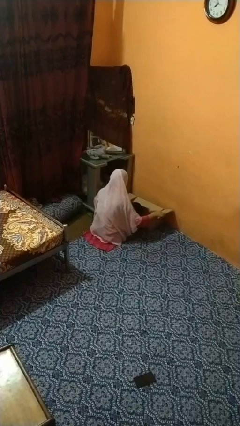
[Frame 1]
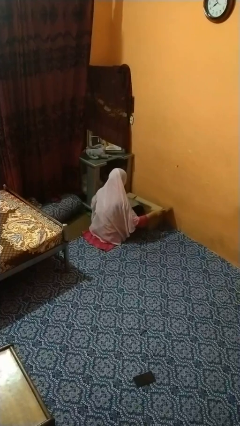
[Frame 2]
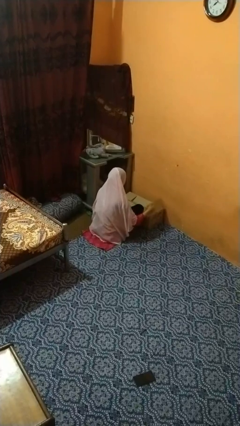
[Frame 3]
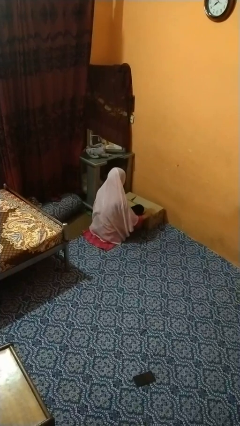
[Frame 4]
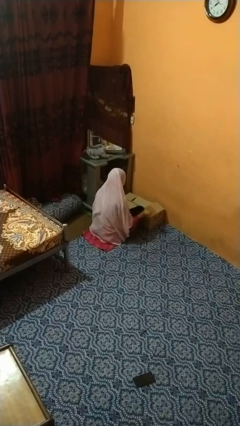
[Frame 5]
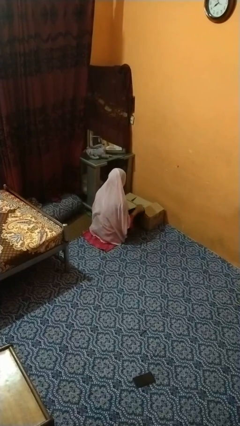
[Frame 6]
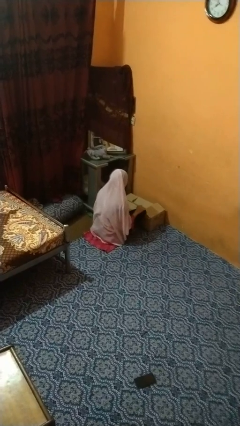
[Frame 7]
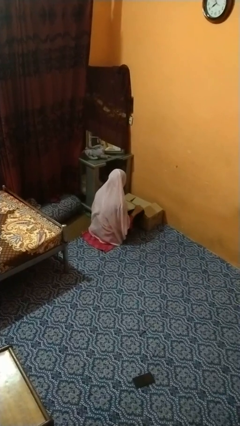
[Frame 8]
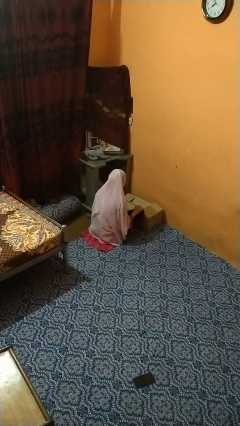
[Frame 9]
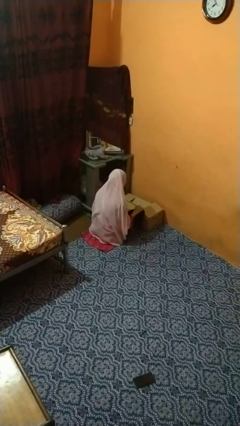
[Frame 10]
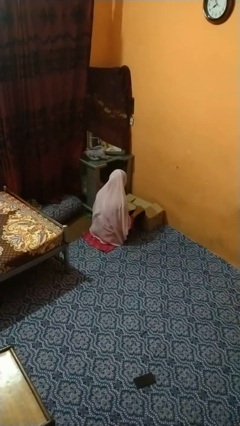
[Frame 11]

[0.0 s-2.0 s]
person closes box

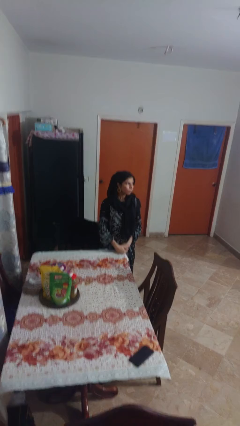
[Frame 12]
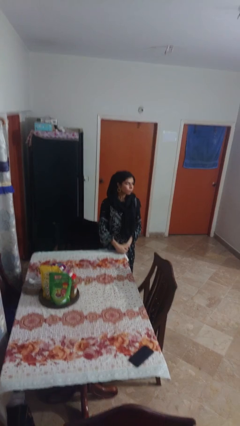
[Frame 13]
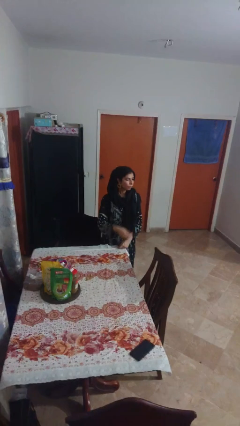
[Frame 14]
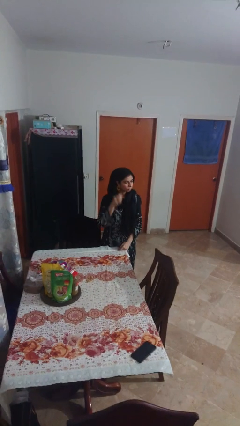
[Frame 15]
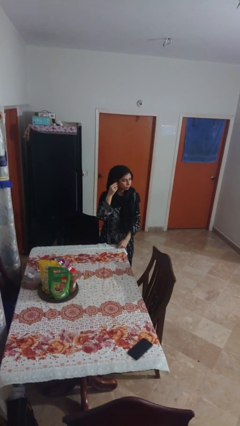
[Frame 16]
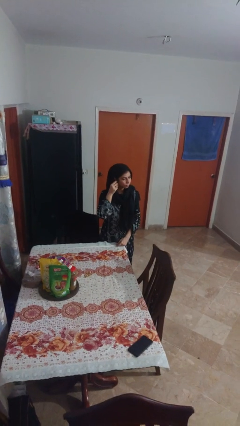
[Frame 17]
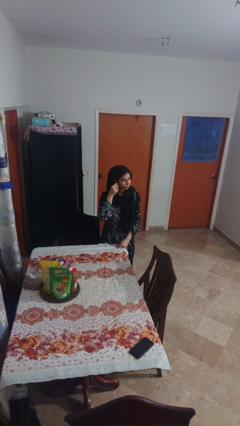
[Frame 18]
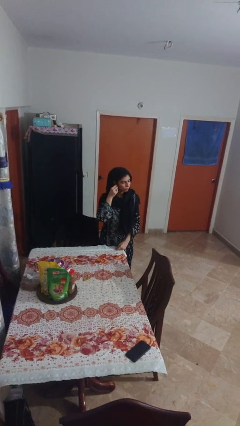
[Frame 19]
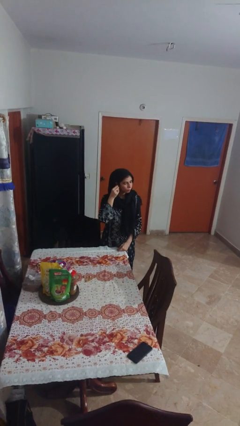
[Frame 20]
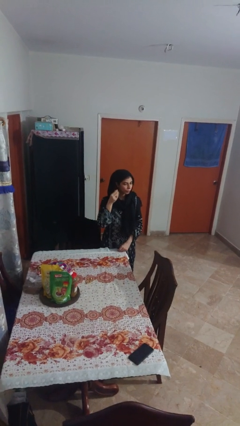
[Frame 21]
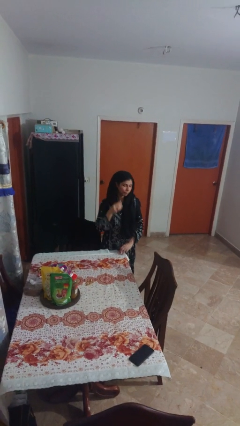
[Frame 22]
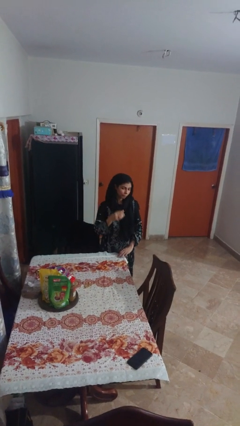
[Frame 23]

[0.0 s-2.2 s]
person takes off earrings

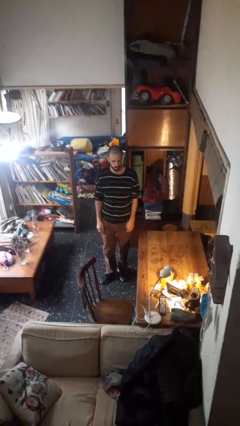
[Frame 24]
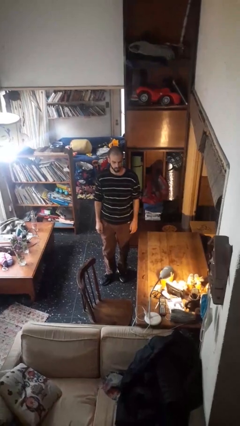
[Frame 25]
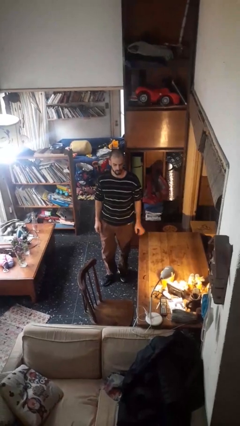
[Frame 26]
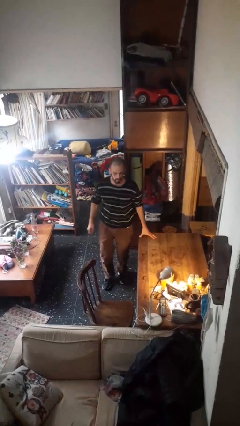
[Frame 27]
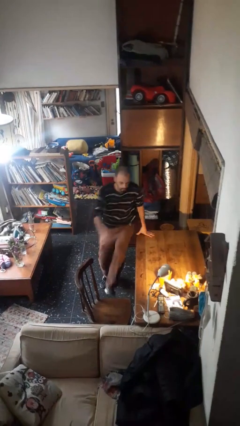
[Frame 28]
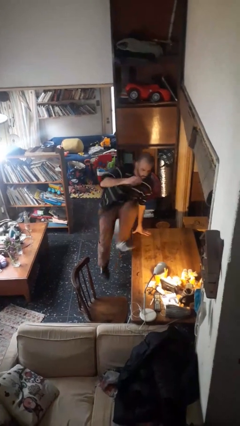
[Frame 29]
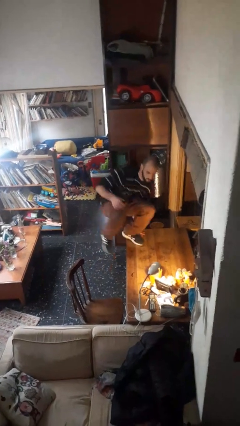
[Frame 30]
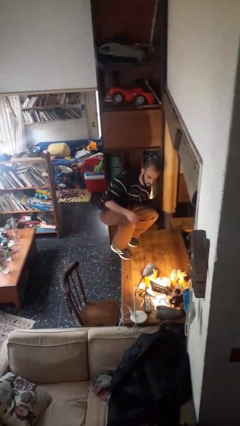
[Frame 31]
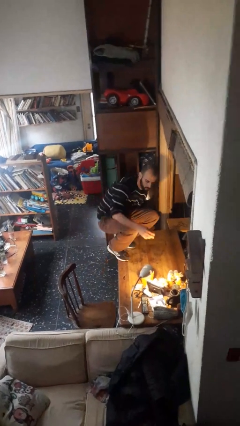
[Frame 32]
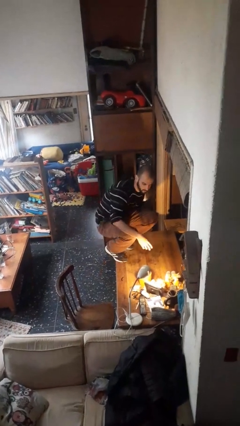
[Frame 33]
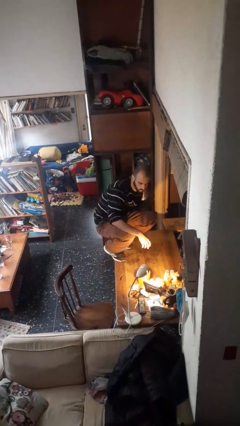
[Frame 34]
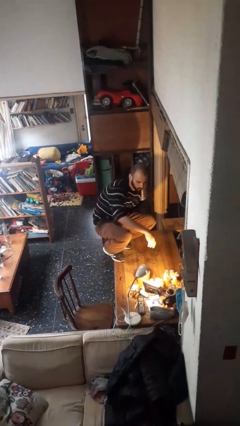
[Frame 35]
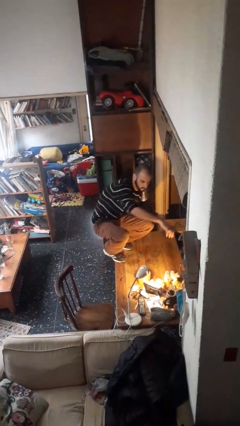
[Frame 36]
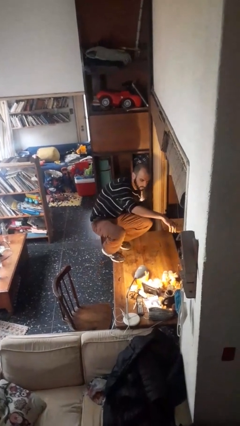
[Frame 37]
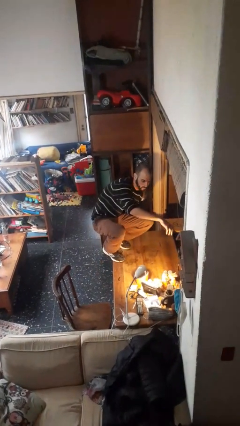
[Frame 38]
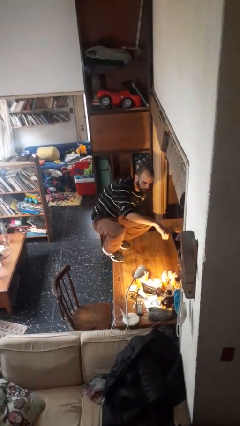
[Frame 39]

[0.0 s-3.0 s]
person climbs on table

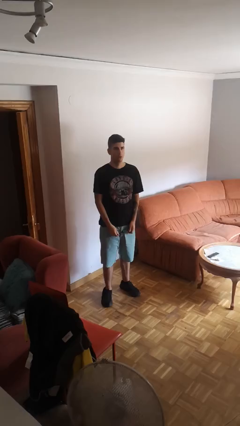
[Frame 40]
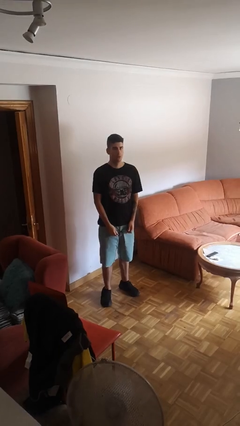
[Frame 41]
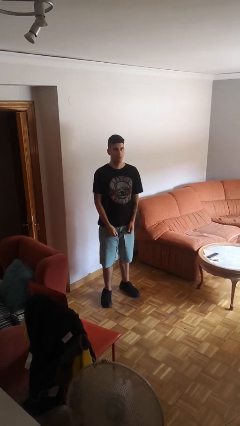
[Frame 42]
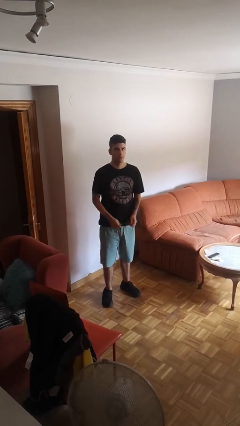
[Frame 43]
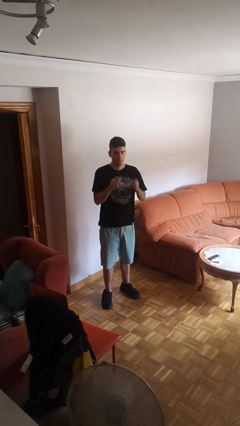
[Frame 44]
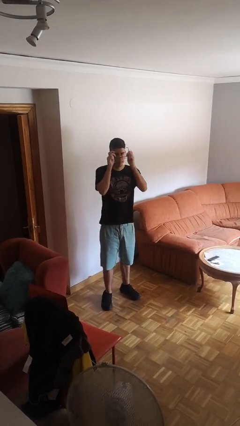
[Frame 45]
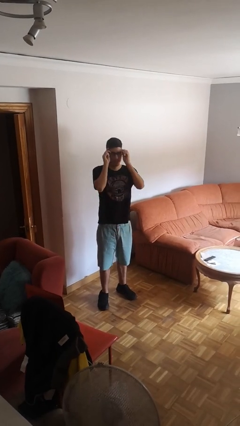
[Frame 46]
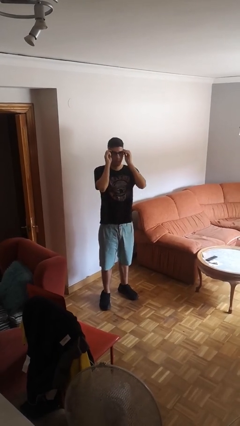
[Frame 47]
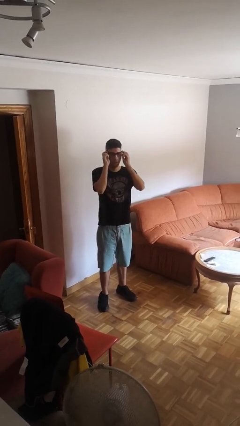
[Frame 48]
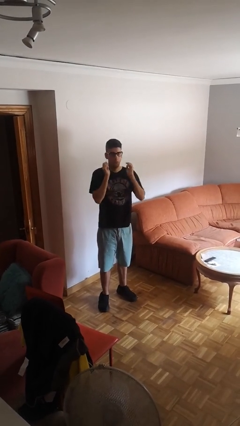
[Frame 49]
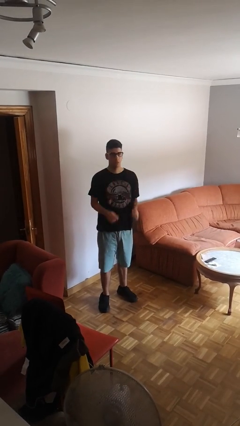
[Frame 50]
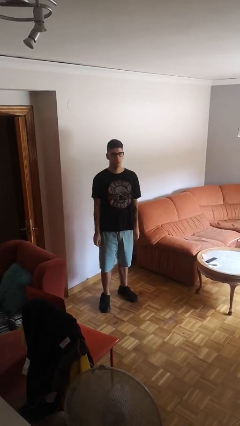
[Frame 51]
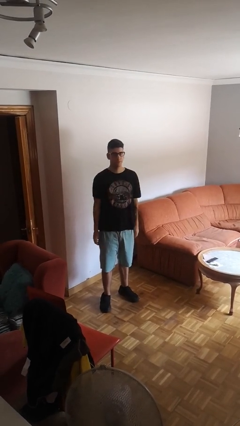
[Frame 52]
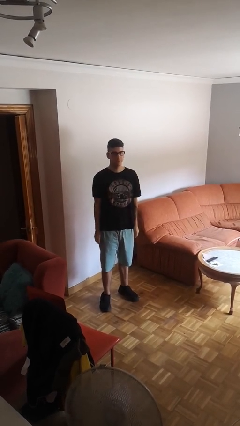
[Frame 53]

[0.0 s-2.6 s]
person puts on glasses

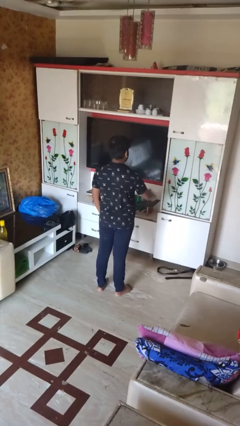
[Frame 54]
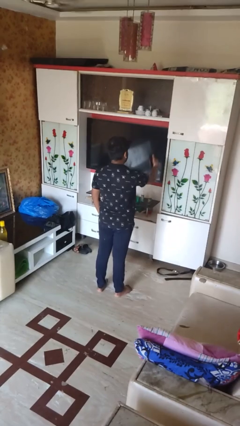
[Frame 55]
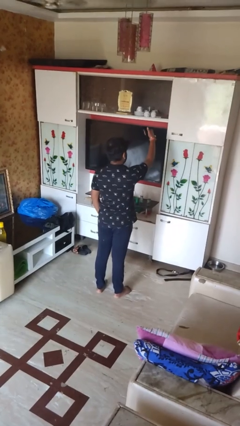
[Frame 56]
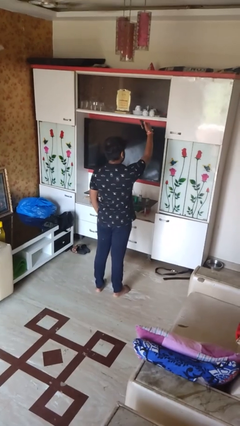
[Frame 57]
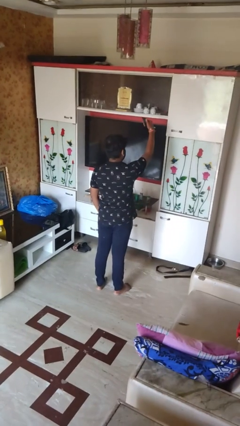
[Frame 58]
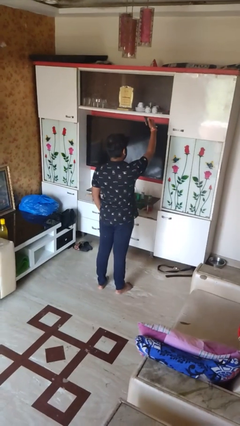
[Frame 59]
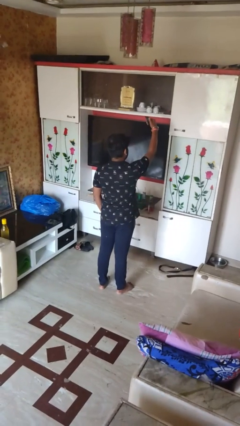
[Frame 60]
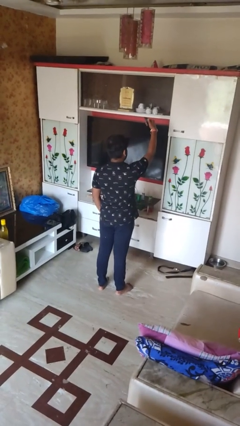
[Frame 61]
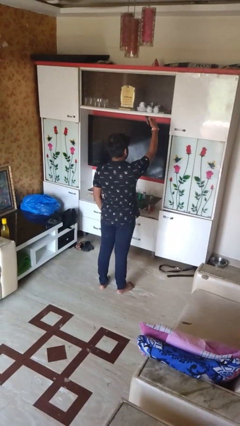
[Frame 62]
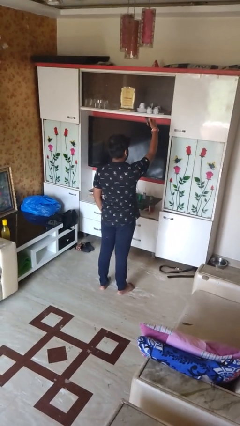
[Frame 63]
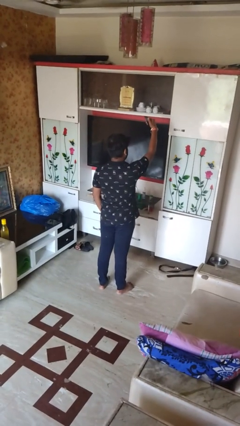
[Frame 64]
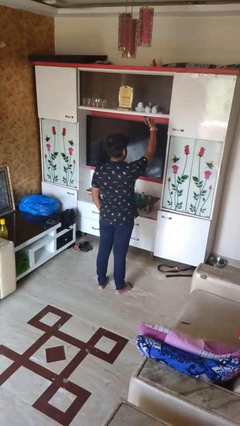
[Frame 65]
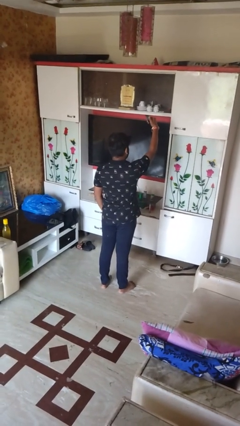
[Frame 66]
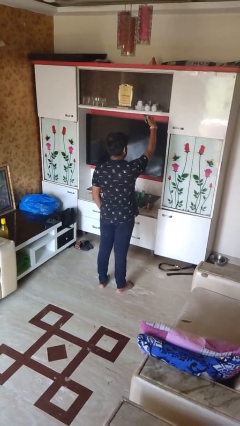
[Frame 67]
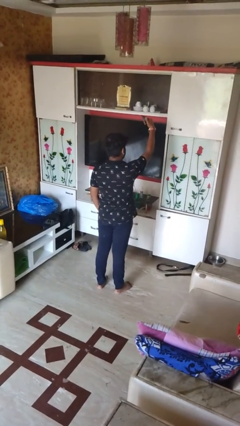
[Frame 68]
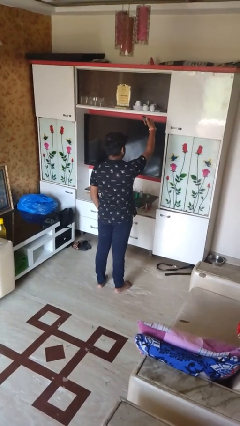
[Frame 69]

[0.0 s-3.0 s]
person takes selfie

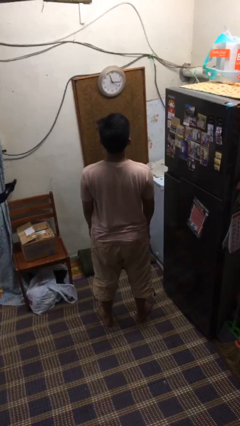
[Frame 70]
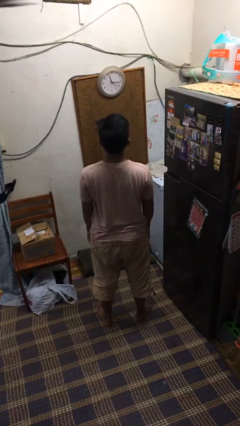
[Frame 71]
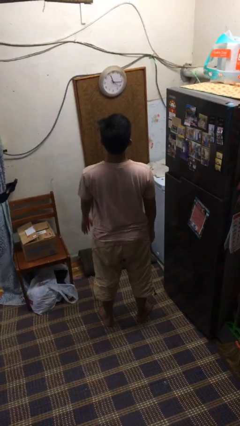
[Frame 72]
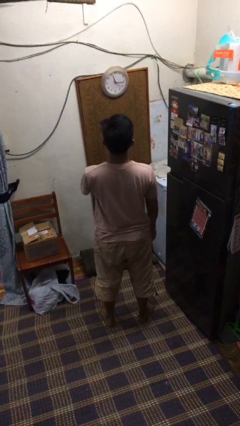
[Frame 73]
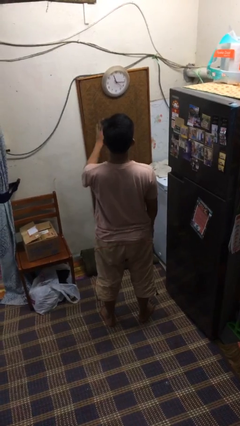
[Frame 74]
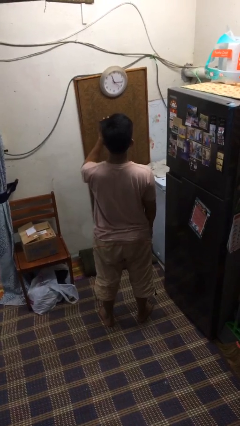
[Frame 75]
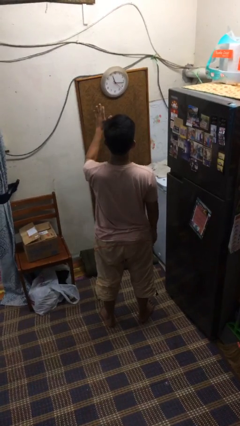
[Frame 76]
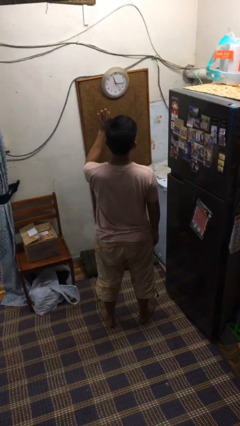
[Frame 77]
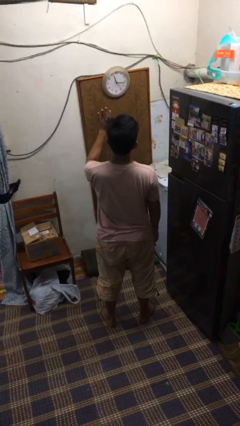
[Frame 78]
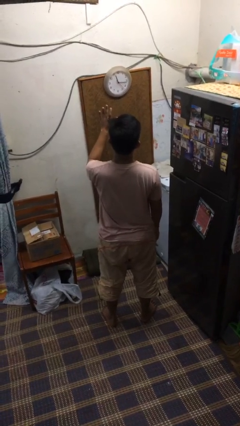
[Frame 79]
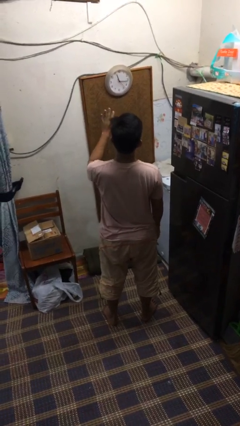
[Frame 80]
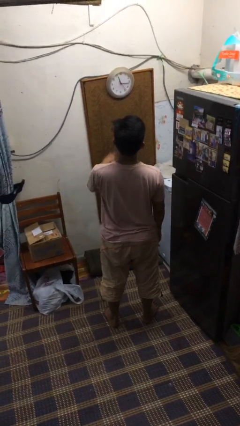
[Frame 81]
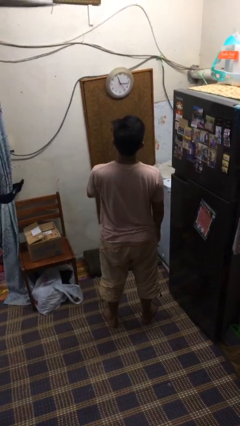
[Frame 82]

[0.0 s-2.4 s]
person gestures stop

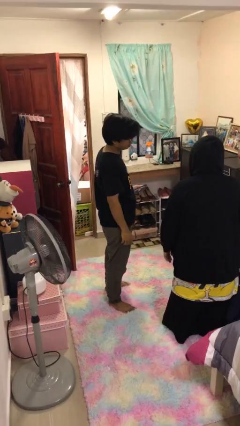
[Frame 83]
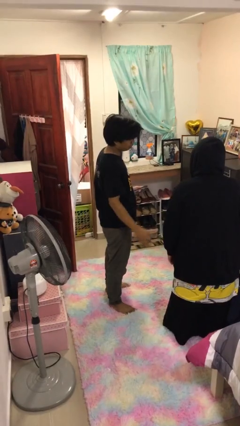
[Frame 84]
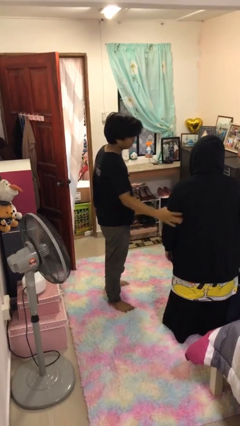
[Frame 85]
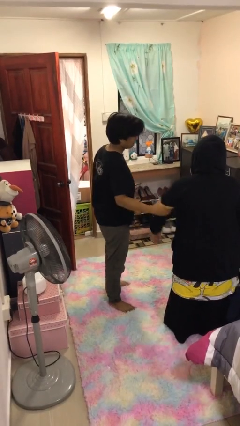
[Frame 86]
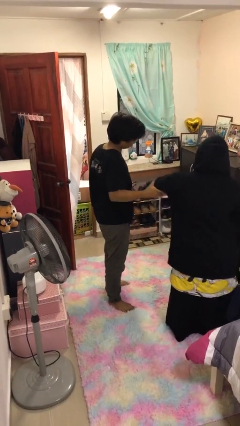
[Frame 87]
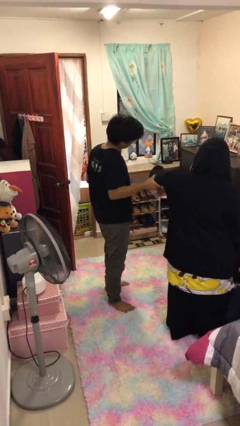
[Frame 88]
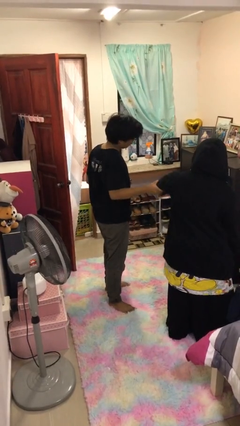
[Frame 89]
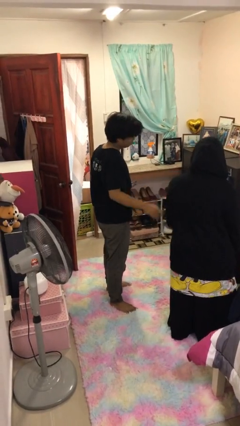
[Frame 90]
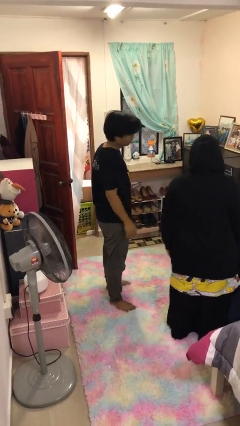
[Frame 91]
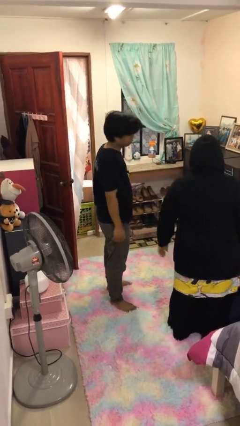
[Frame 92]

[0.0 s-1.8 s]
person grabs person by bicep
